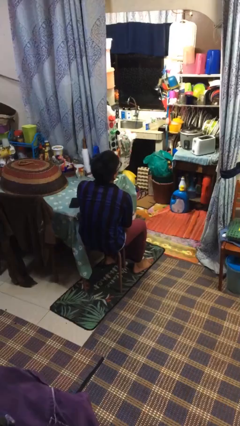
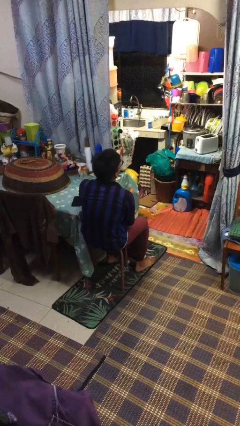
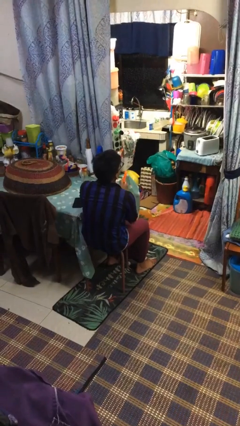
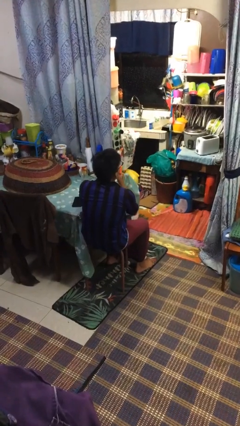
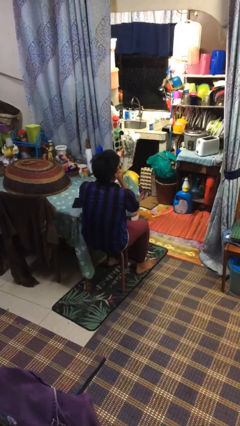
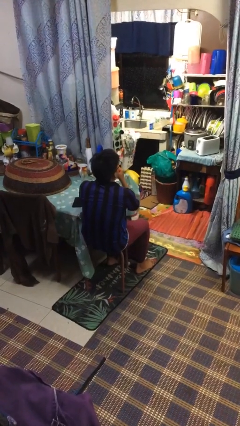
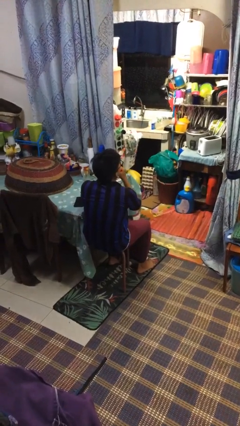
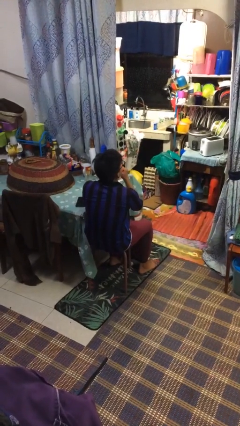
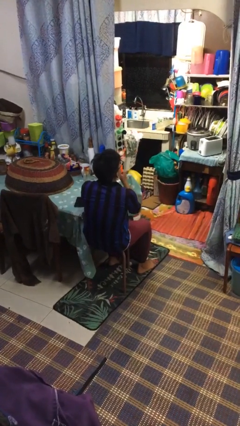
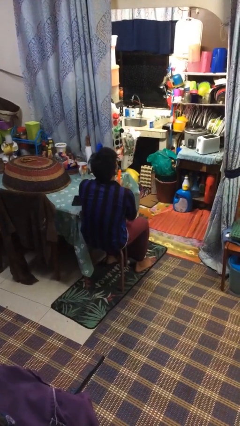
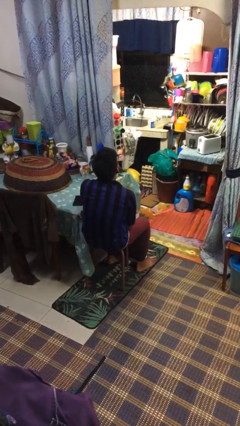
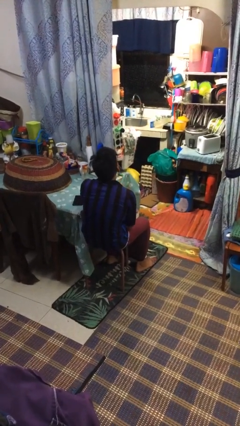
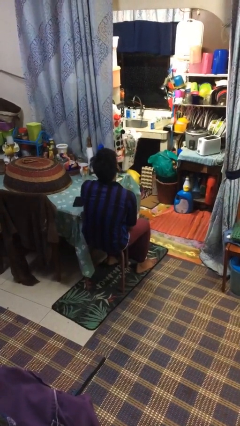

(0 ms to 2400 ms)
person vapes

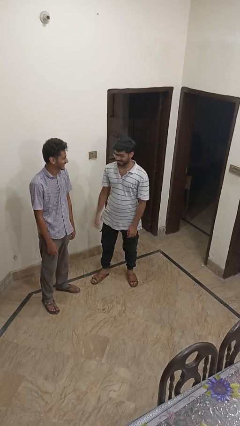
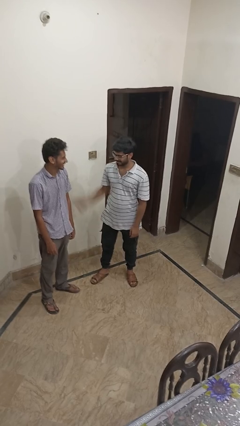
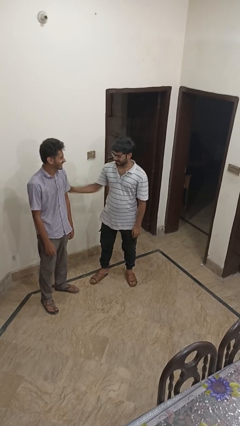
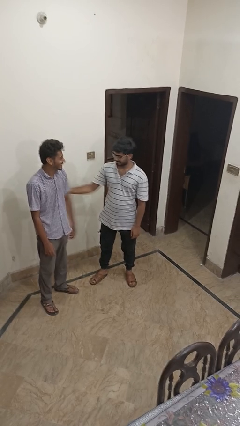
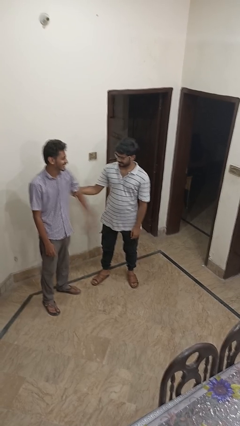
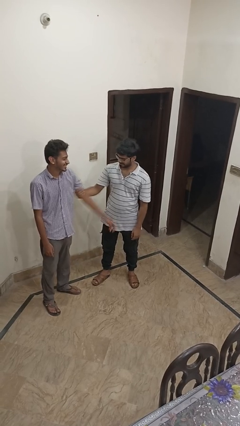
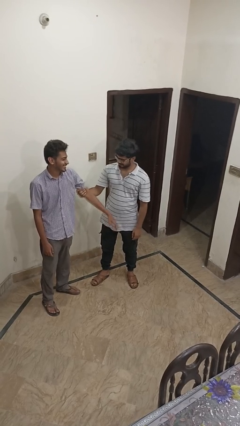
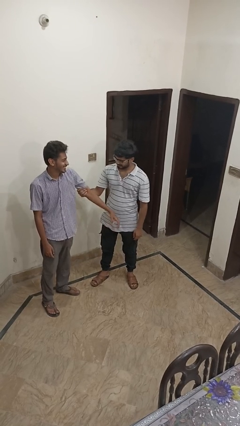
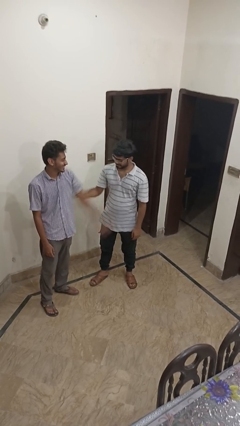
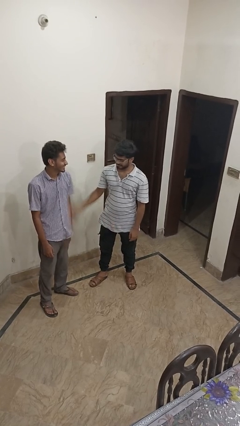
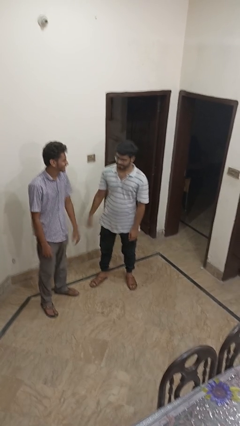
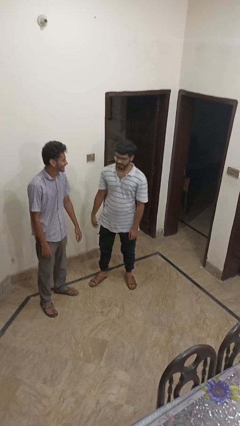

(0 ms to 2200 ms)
person grabs person by bicep

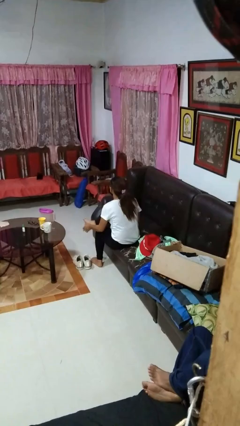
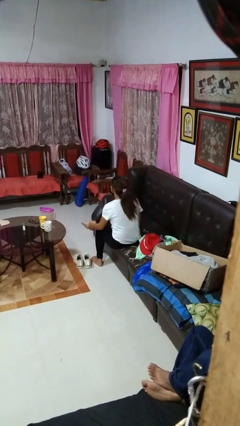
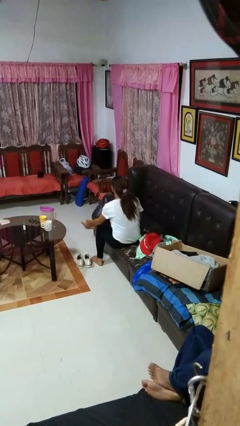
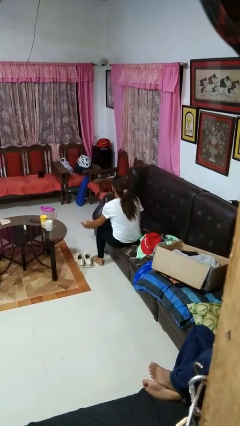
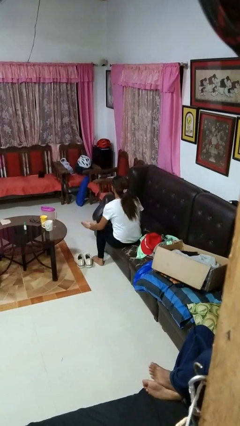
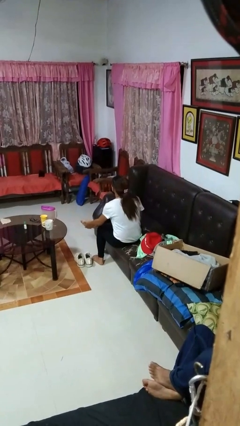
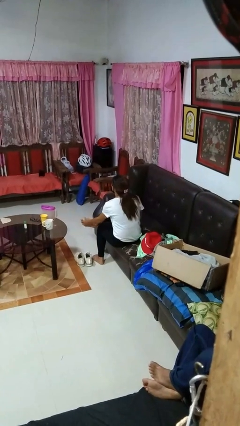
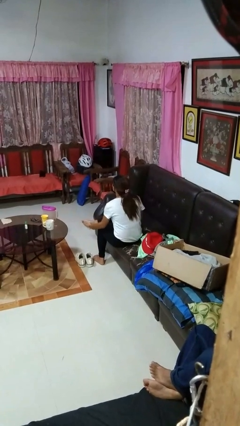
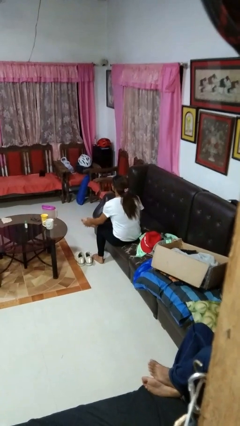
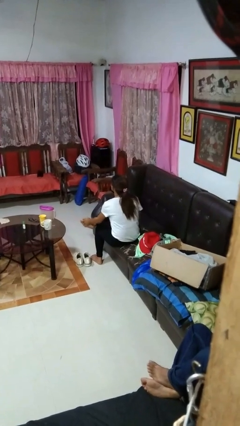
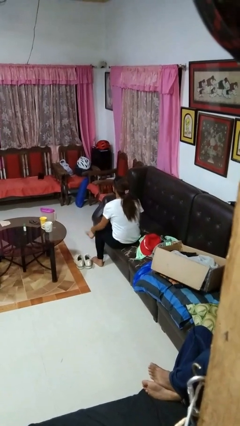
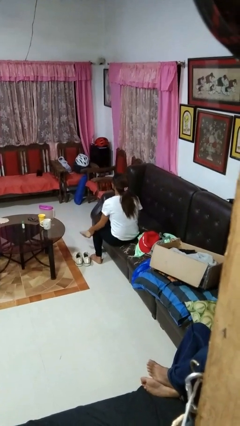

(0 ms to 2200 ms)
person rubs foot

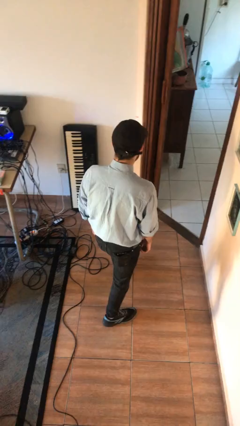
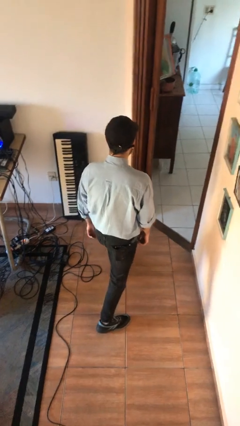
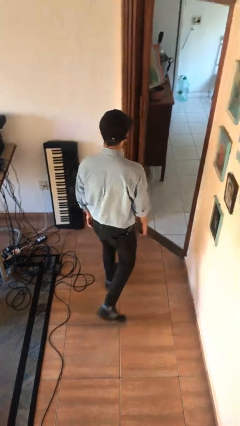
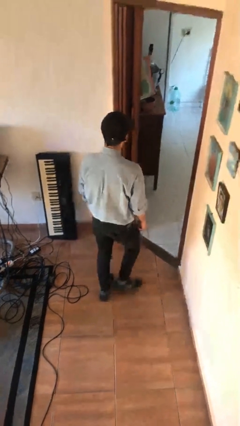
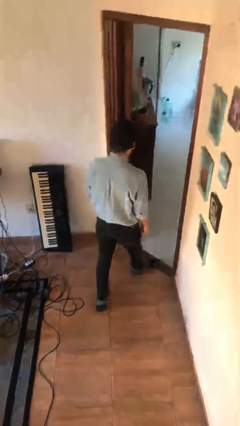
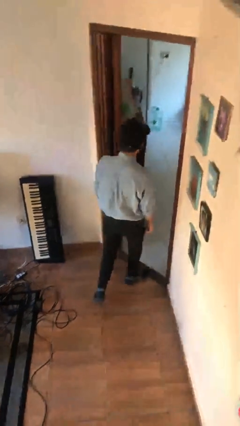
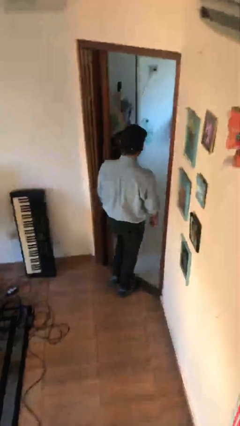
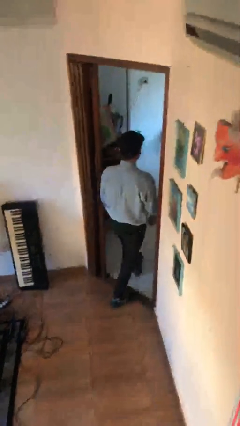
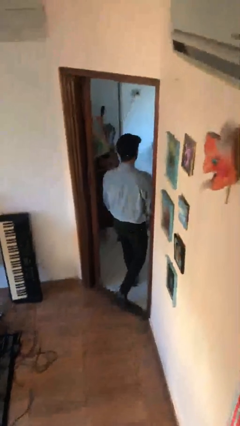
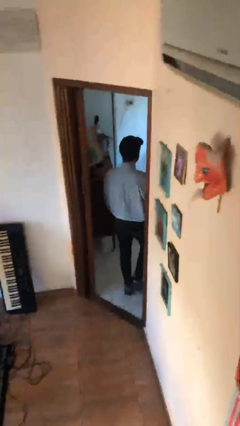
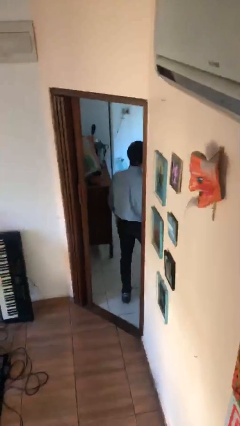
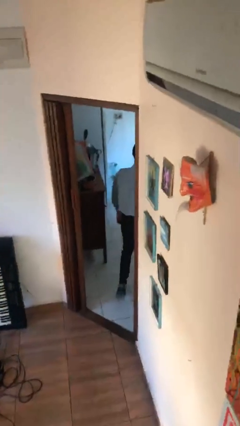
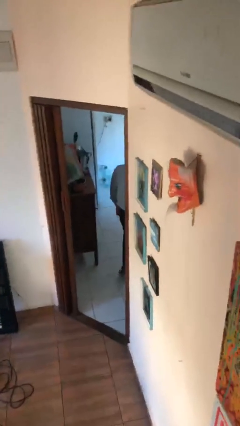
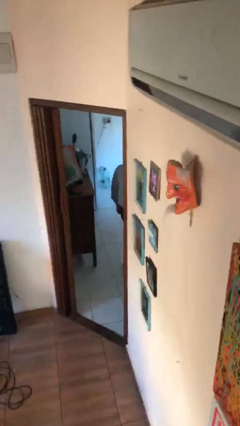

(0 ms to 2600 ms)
person exits scene through structure

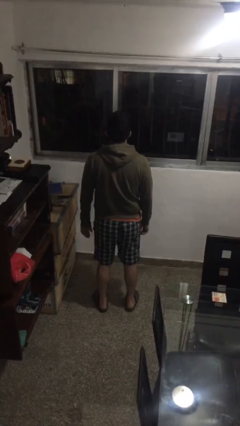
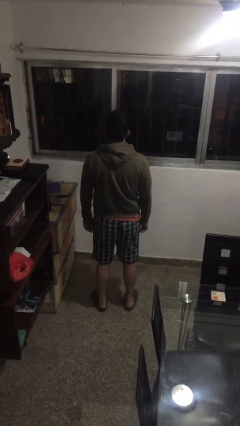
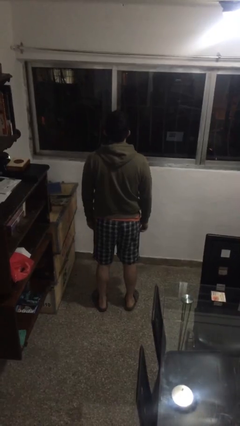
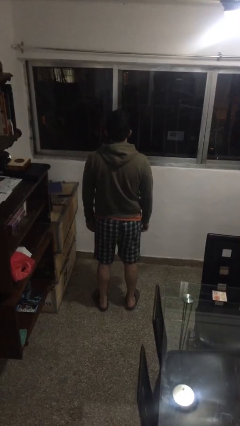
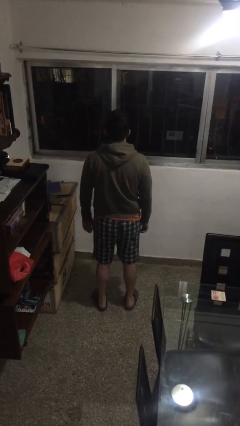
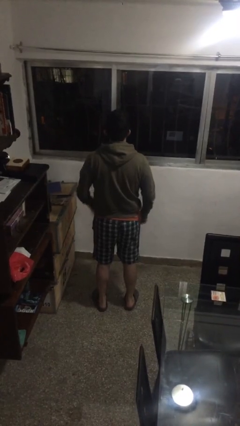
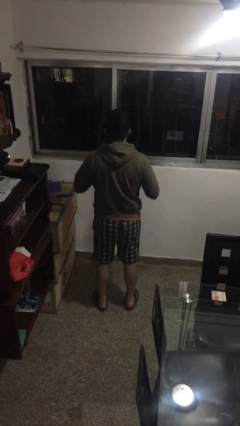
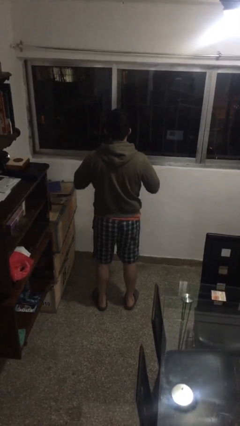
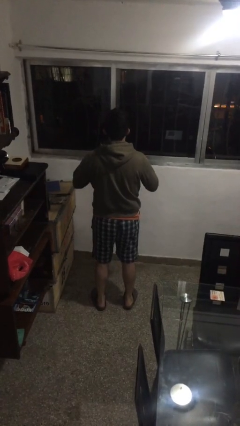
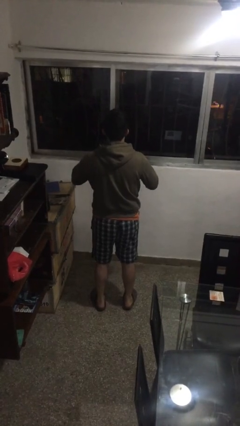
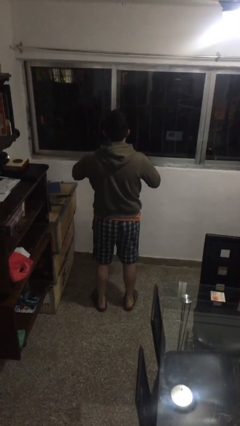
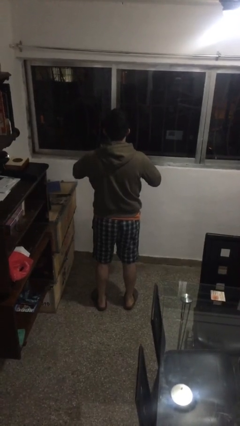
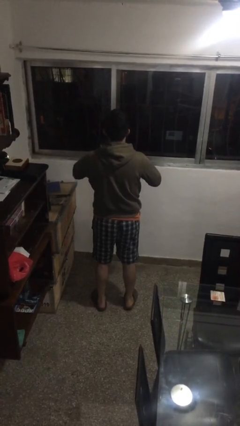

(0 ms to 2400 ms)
person unzips jacket

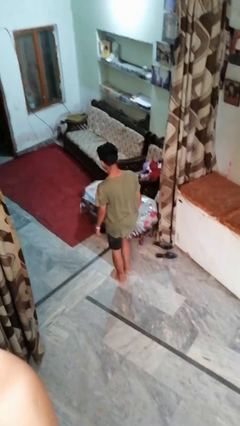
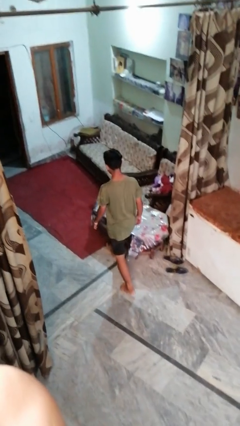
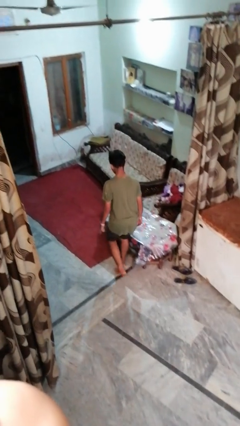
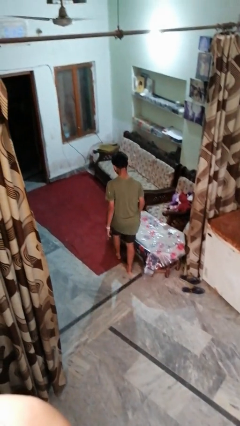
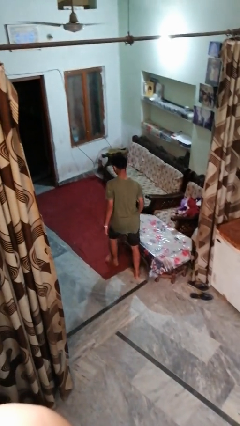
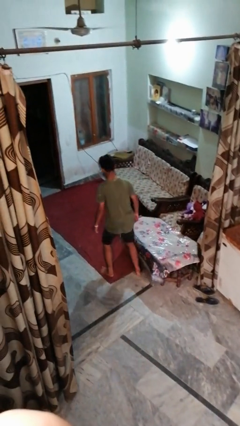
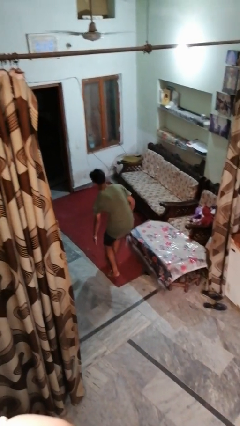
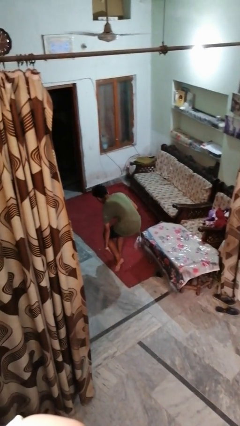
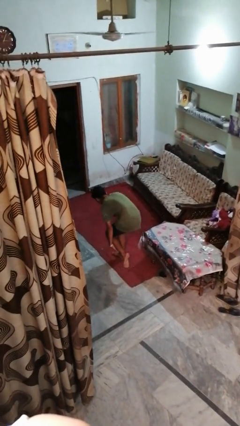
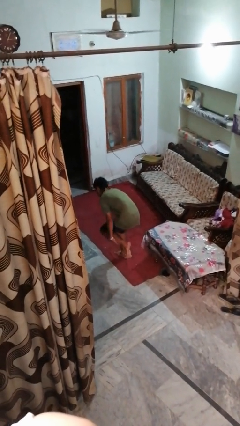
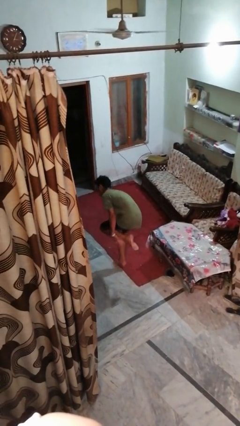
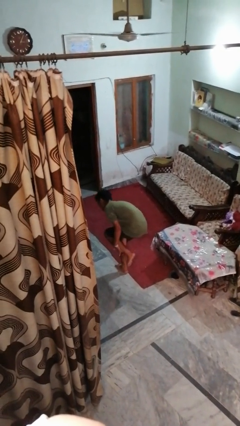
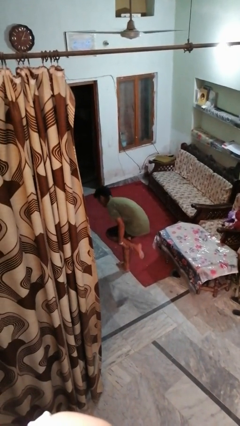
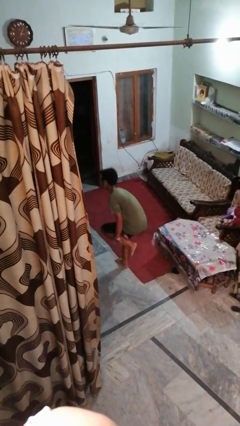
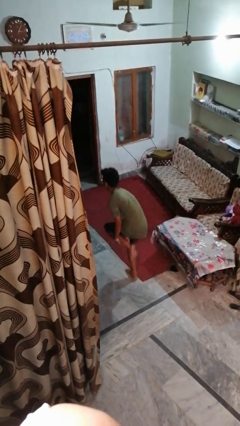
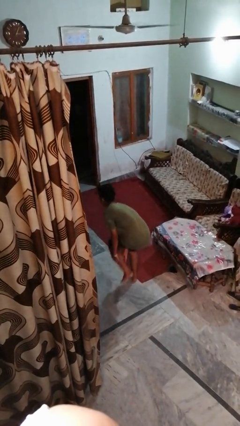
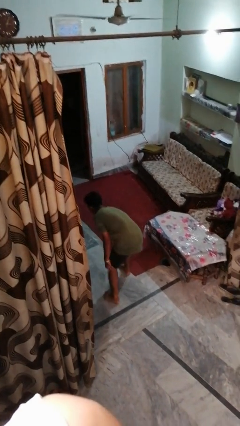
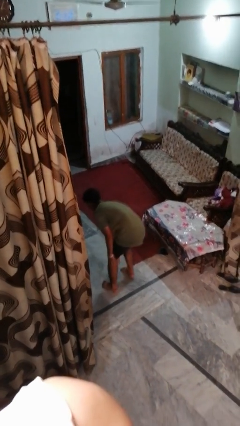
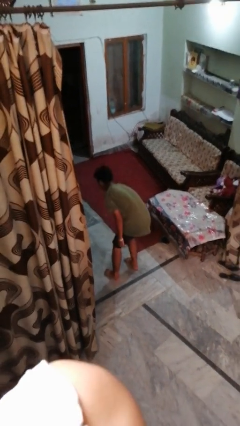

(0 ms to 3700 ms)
person stubs toe

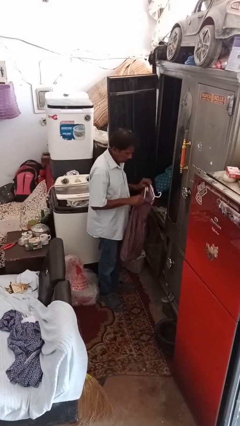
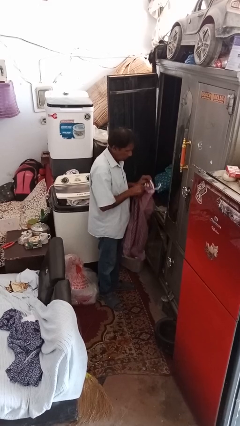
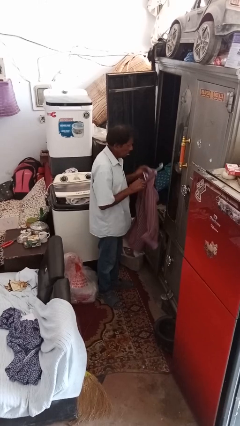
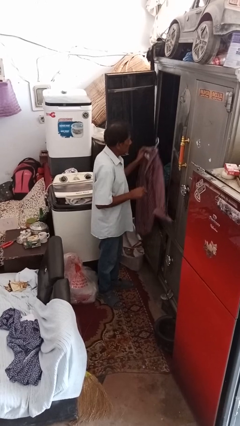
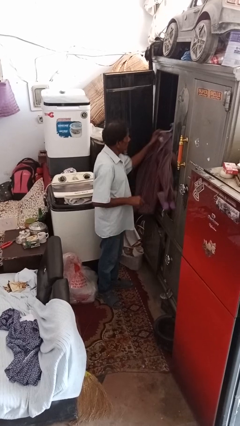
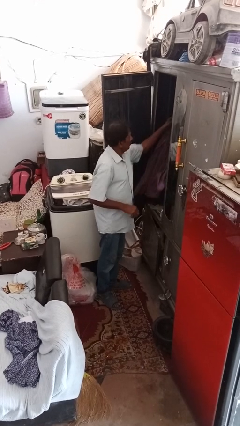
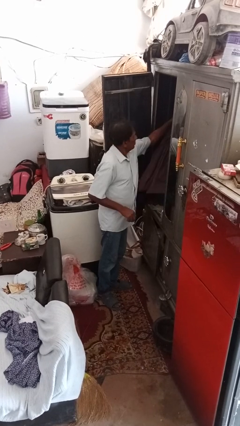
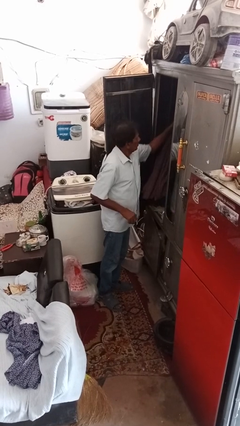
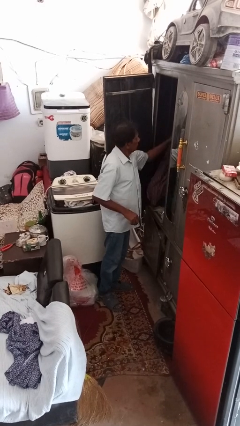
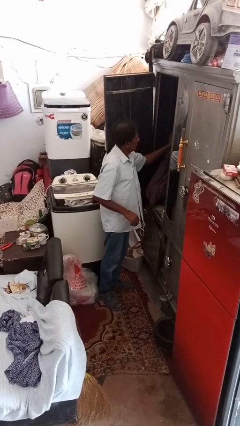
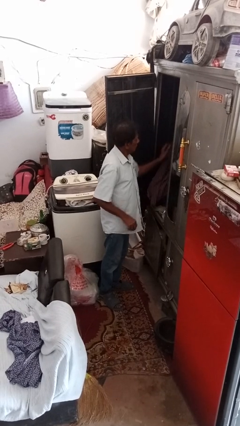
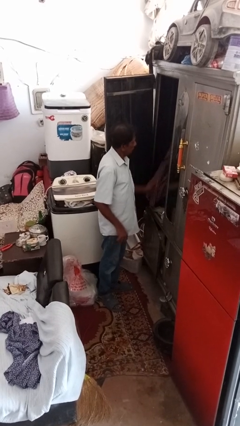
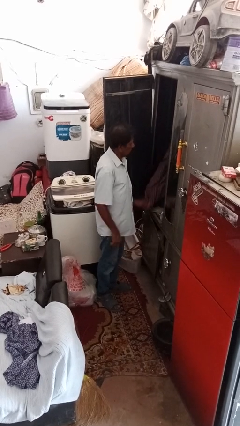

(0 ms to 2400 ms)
person puts clothes into closet
